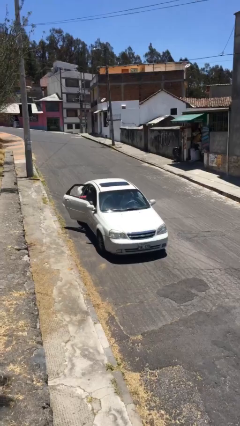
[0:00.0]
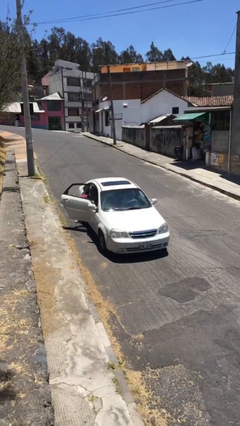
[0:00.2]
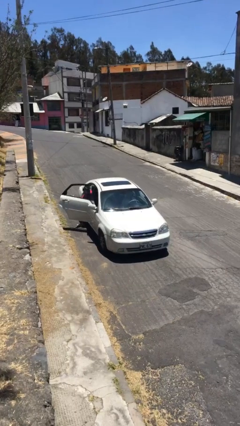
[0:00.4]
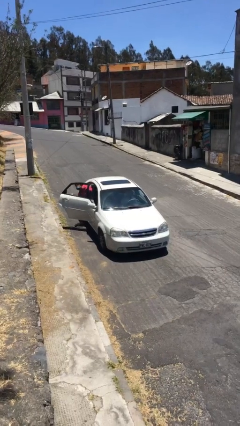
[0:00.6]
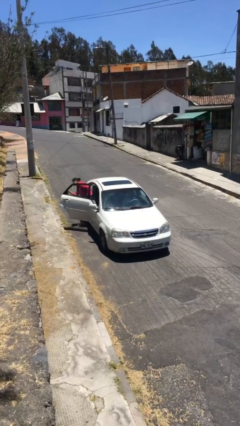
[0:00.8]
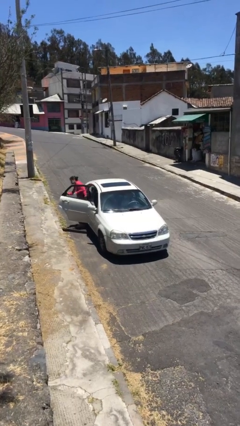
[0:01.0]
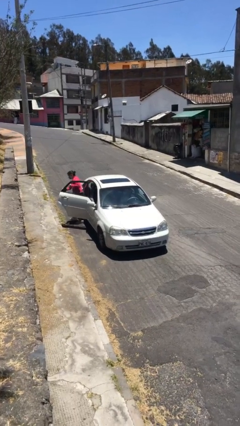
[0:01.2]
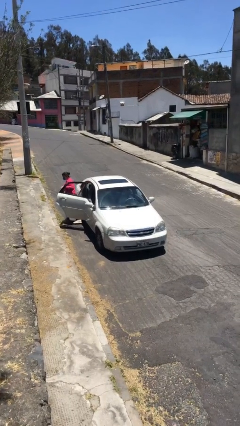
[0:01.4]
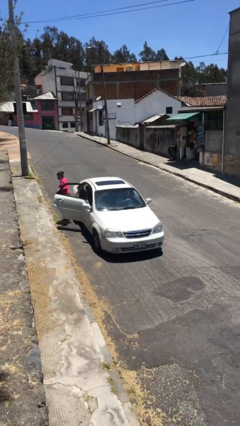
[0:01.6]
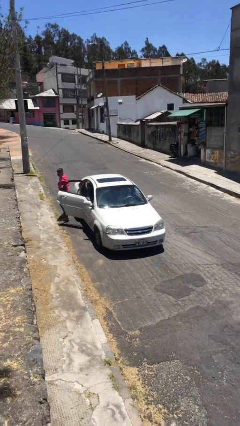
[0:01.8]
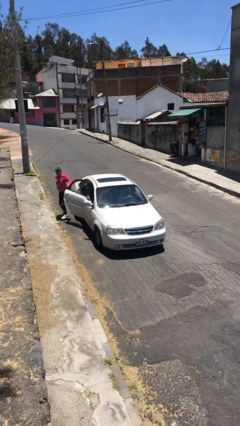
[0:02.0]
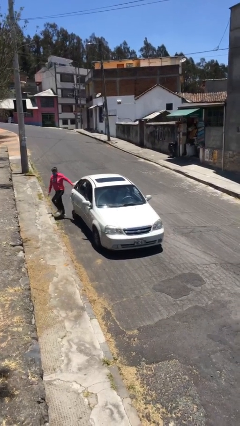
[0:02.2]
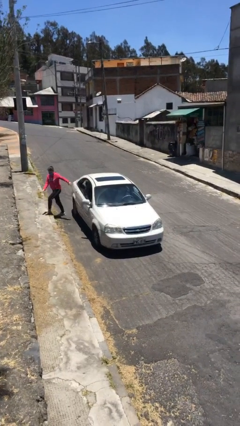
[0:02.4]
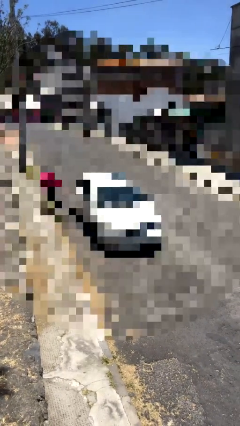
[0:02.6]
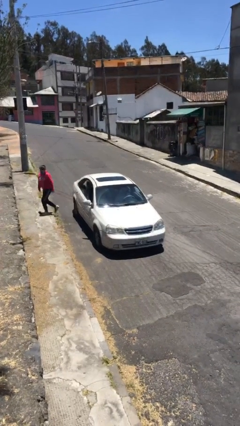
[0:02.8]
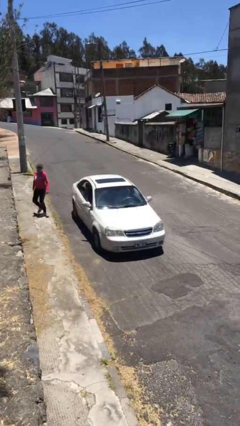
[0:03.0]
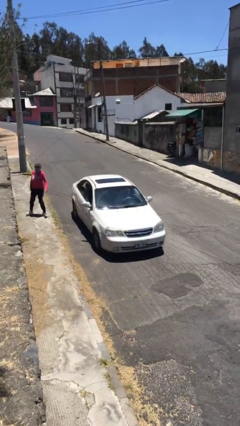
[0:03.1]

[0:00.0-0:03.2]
car drops off person

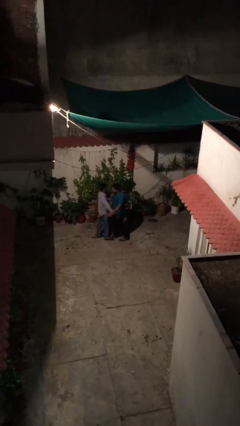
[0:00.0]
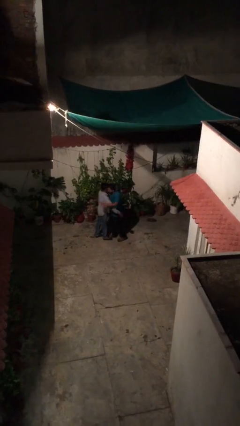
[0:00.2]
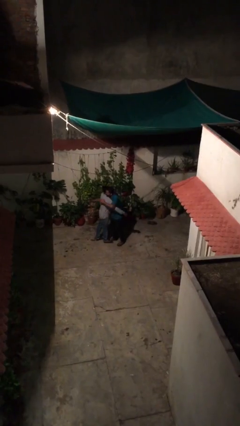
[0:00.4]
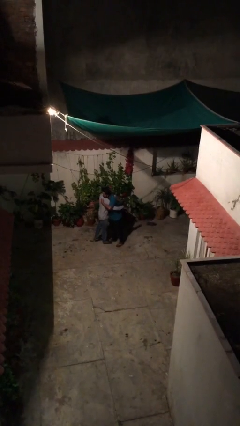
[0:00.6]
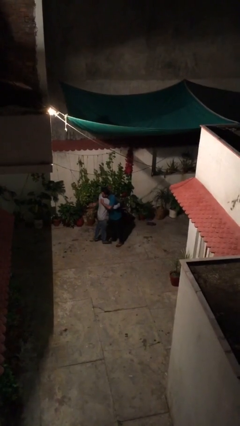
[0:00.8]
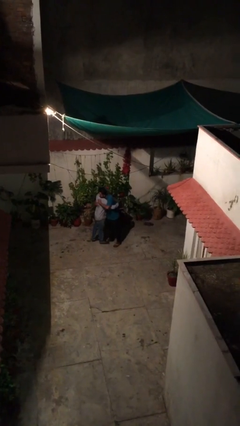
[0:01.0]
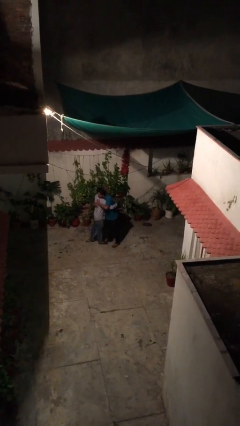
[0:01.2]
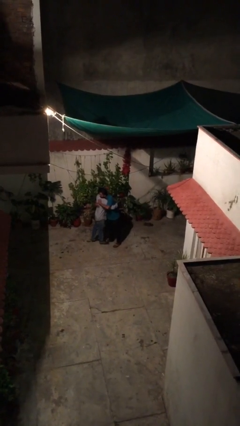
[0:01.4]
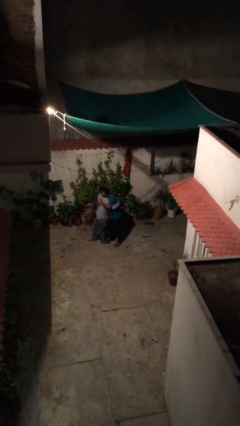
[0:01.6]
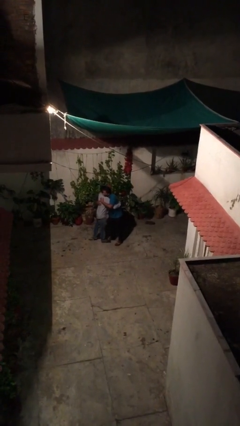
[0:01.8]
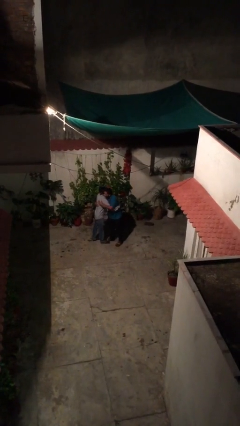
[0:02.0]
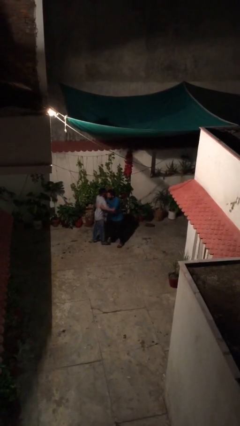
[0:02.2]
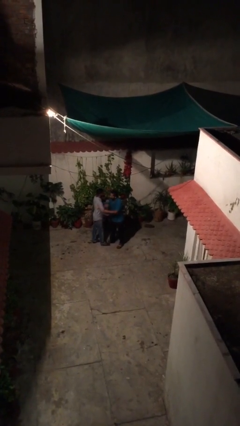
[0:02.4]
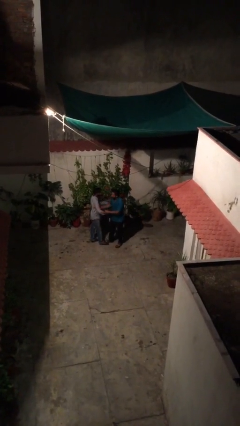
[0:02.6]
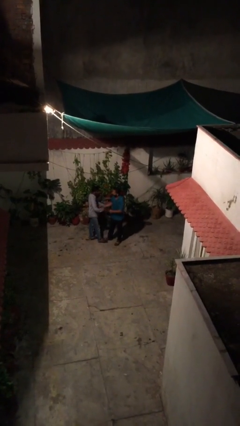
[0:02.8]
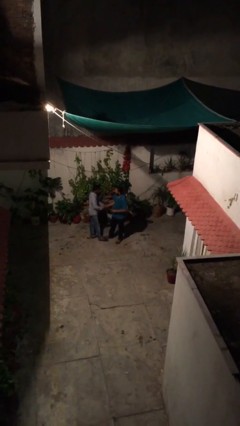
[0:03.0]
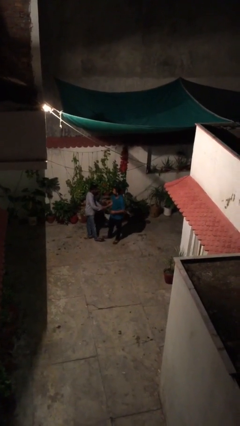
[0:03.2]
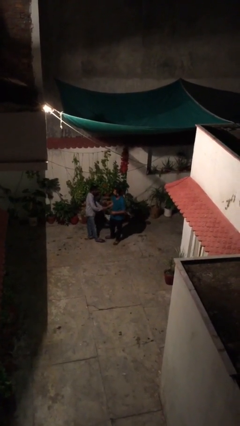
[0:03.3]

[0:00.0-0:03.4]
person embraces person

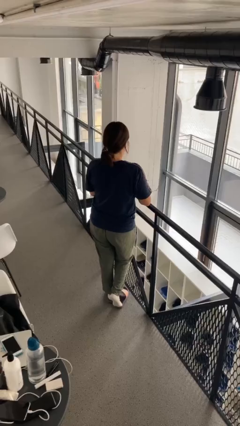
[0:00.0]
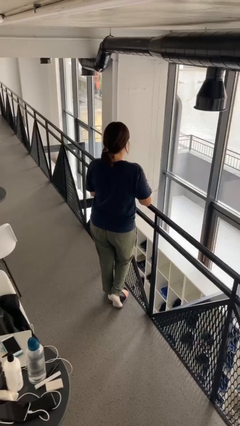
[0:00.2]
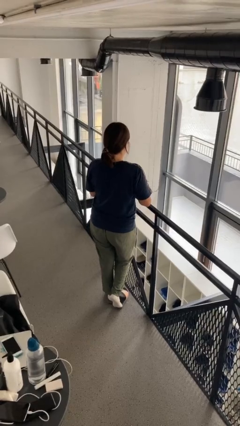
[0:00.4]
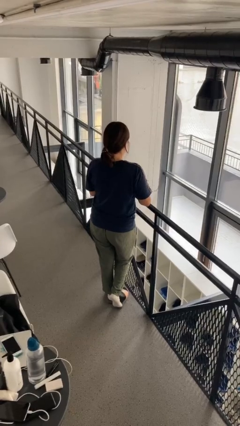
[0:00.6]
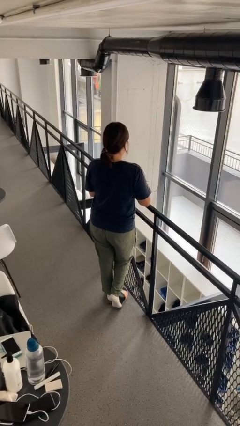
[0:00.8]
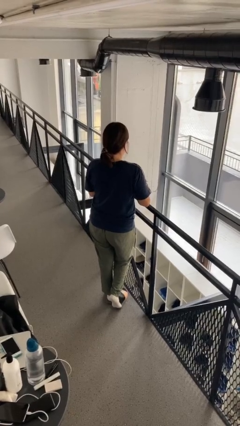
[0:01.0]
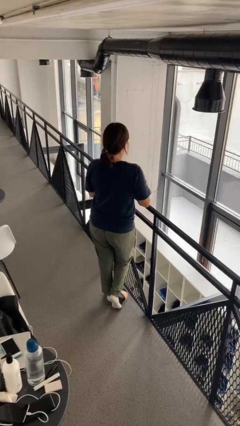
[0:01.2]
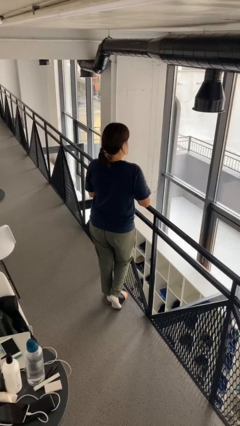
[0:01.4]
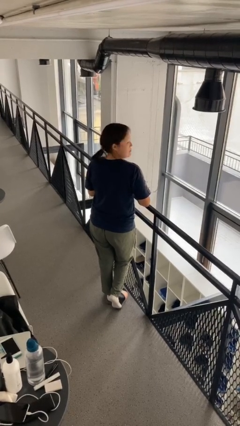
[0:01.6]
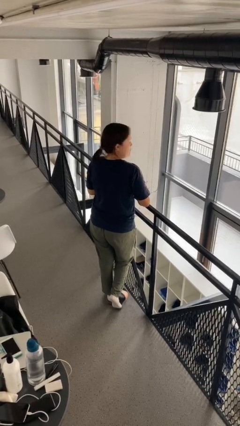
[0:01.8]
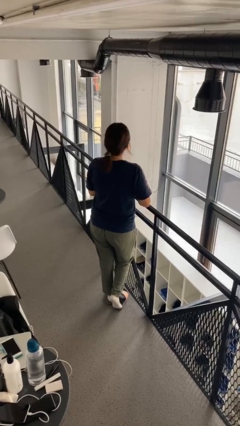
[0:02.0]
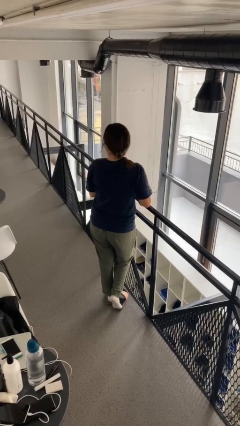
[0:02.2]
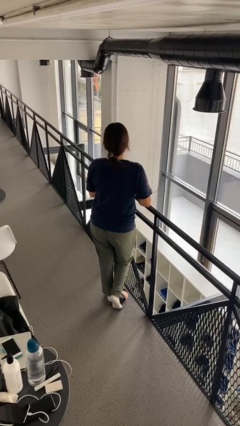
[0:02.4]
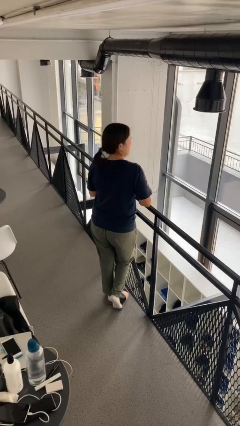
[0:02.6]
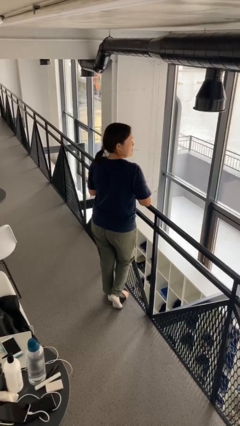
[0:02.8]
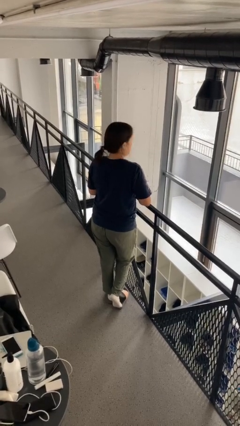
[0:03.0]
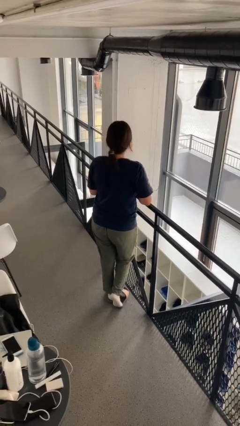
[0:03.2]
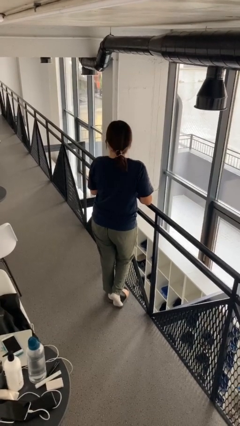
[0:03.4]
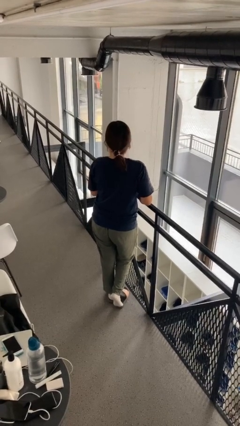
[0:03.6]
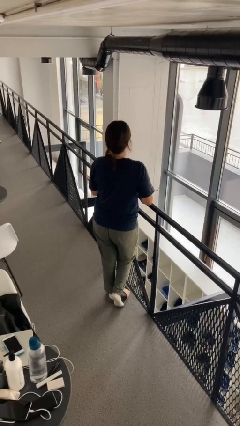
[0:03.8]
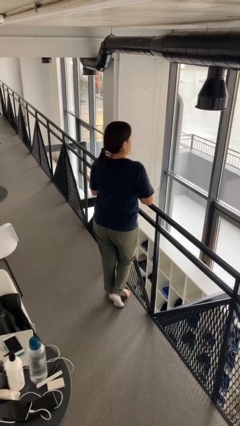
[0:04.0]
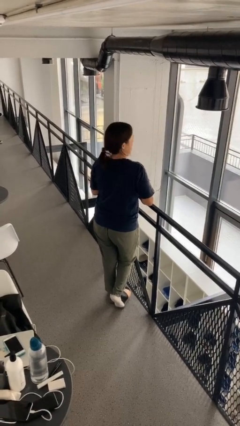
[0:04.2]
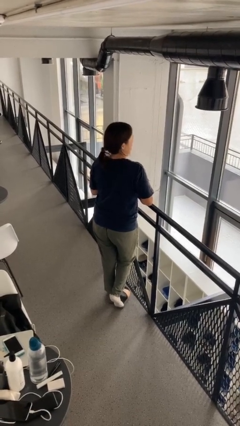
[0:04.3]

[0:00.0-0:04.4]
person shakes head

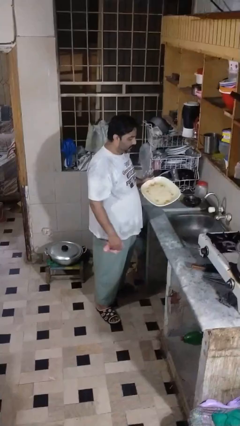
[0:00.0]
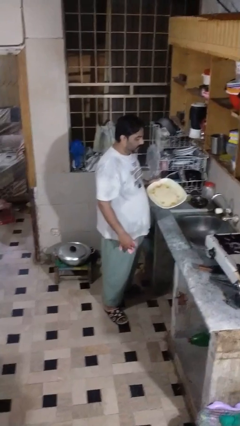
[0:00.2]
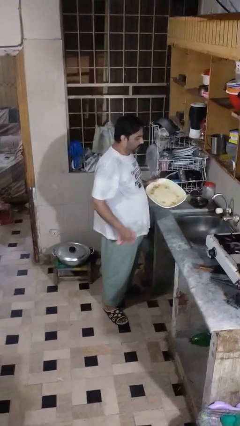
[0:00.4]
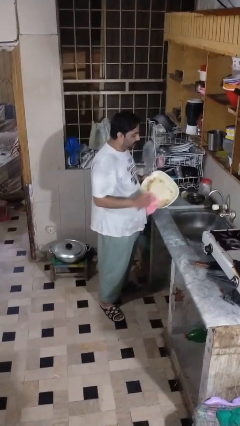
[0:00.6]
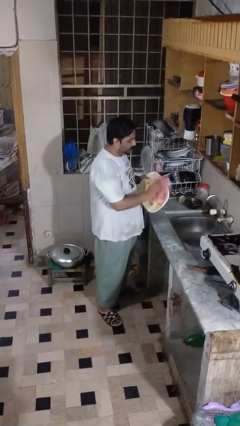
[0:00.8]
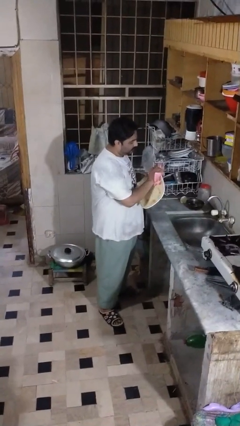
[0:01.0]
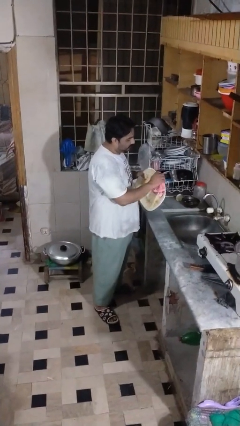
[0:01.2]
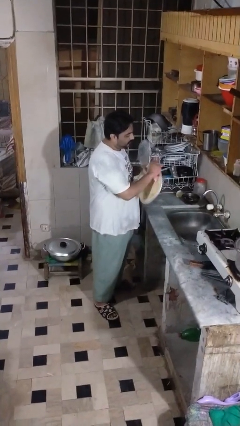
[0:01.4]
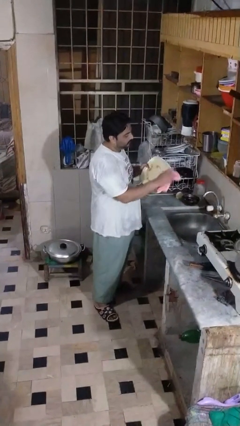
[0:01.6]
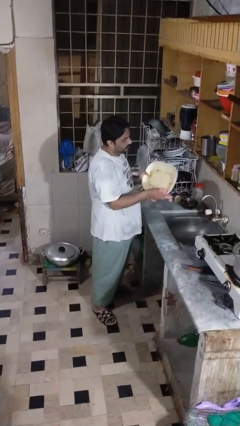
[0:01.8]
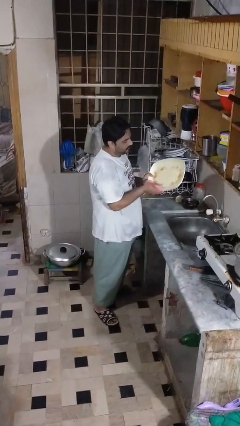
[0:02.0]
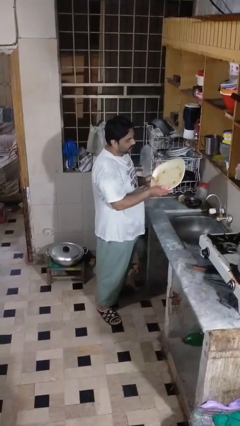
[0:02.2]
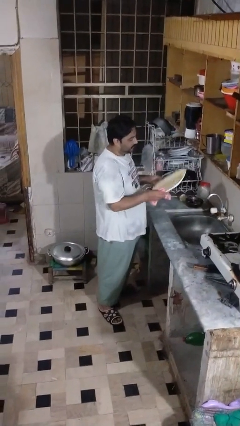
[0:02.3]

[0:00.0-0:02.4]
person dries dish

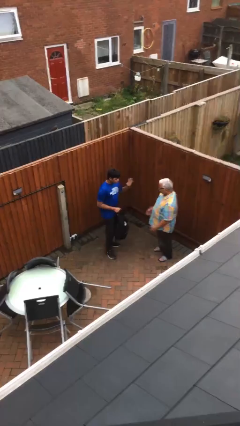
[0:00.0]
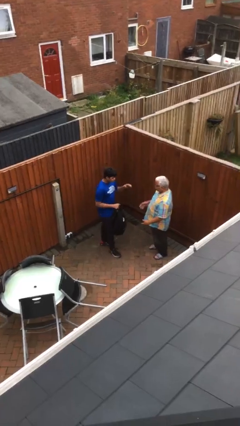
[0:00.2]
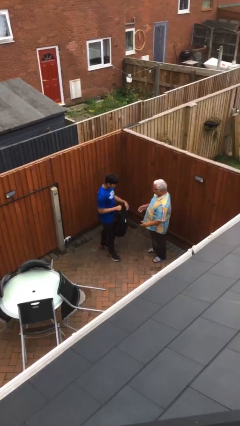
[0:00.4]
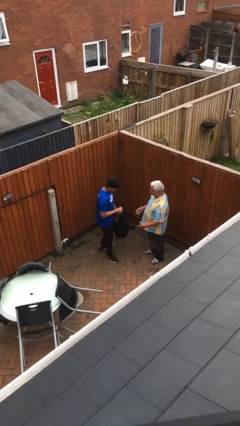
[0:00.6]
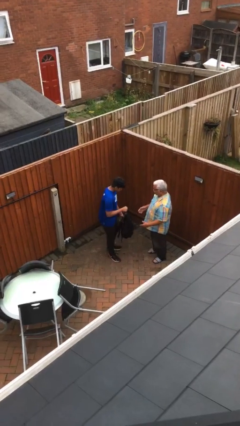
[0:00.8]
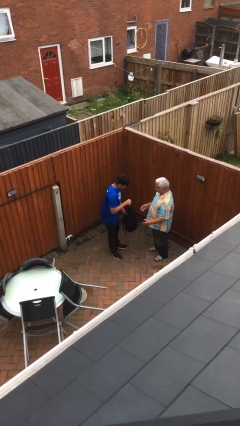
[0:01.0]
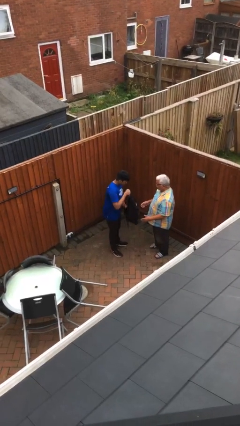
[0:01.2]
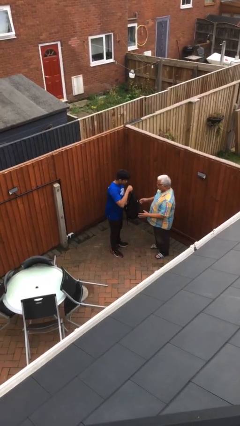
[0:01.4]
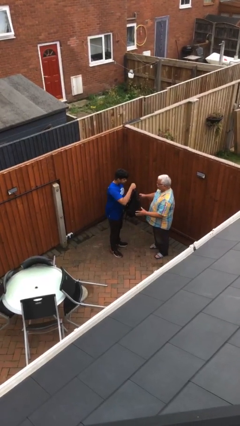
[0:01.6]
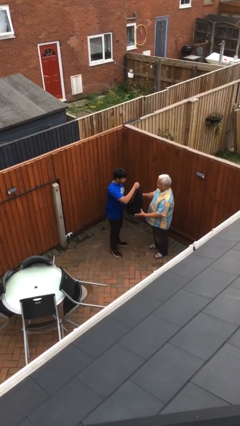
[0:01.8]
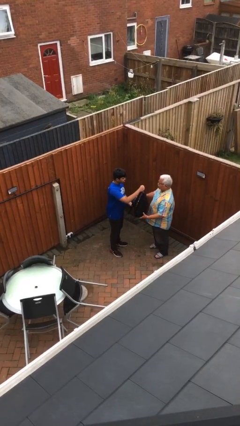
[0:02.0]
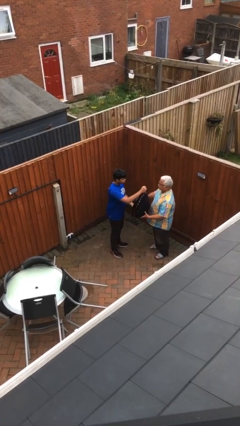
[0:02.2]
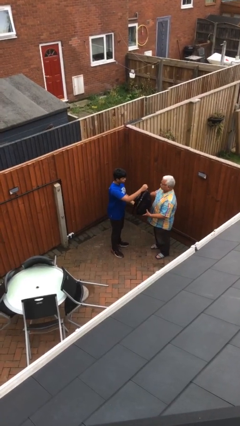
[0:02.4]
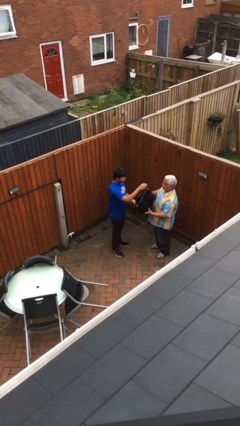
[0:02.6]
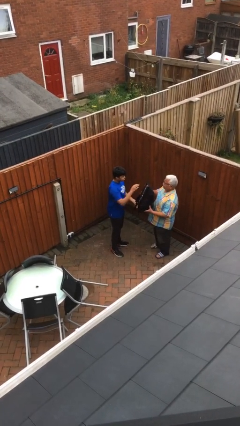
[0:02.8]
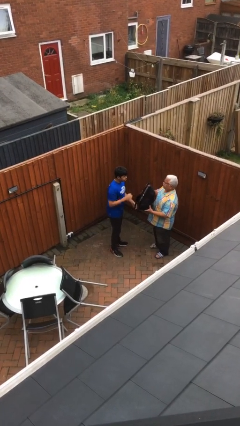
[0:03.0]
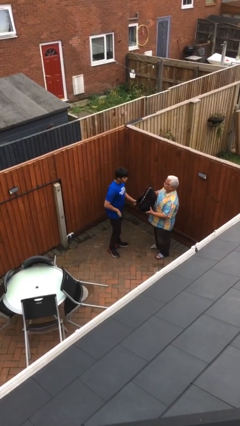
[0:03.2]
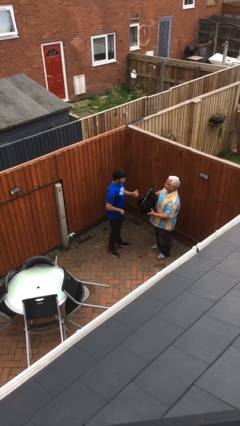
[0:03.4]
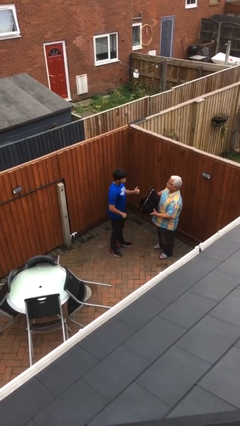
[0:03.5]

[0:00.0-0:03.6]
person transfers object to person

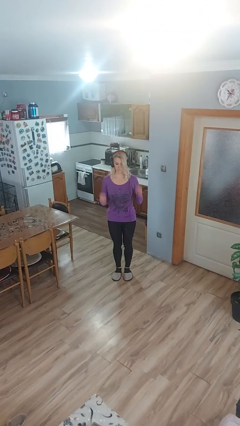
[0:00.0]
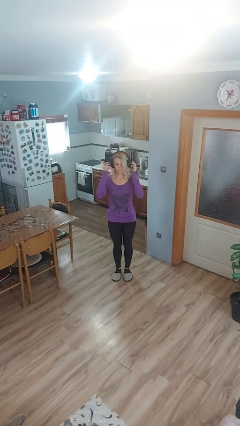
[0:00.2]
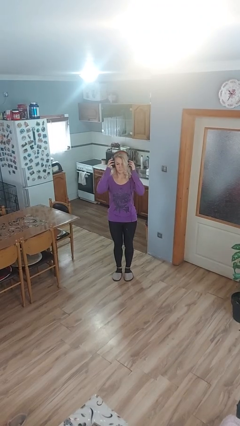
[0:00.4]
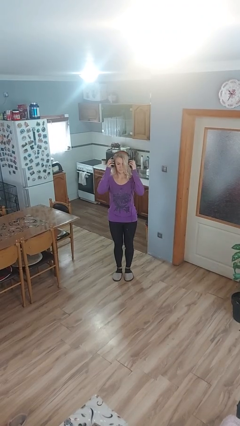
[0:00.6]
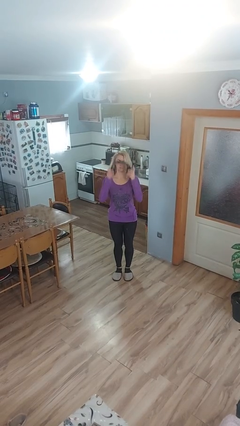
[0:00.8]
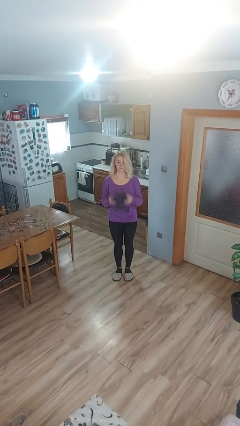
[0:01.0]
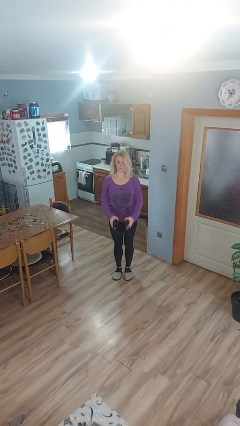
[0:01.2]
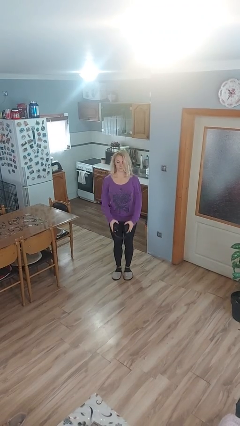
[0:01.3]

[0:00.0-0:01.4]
person takes off headphones
